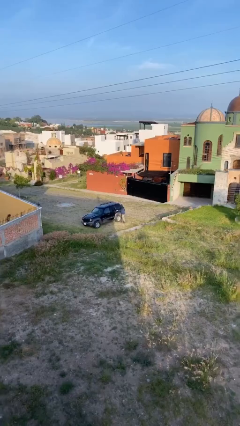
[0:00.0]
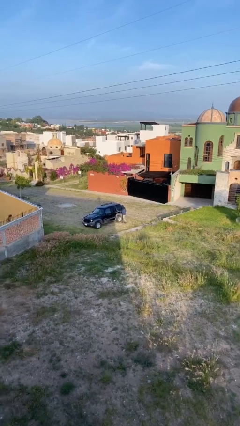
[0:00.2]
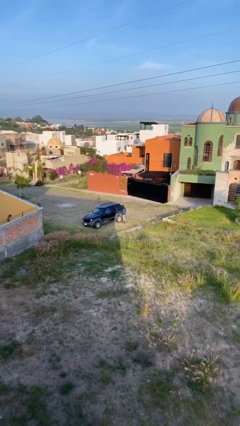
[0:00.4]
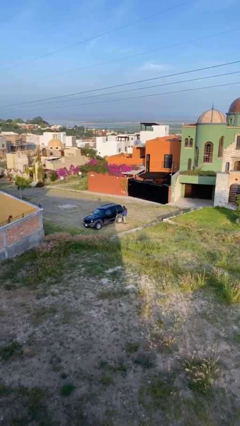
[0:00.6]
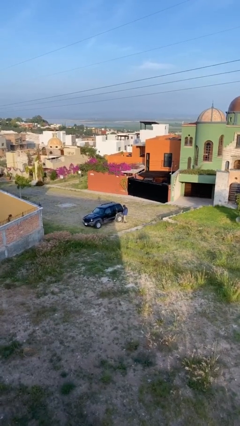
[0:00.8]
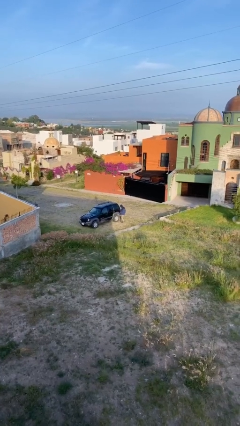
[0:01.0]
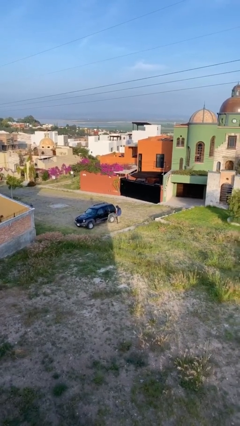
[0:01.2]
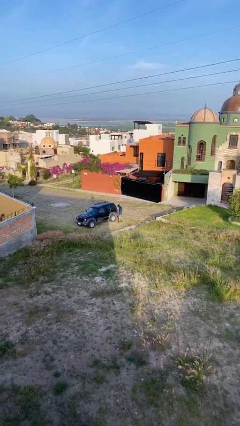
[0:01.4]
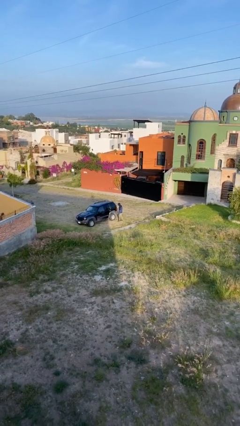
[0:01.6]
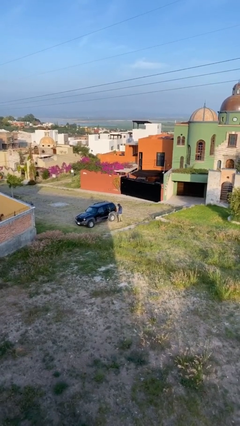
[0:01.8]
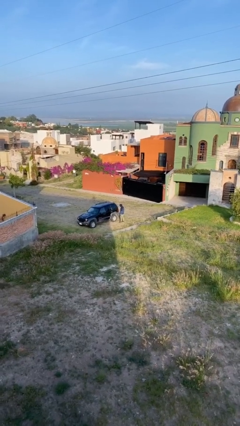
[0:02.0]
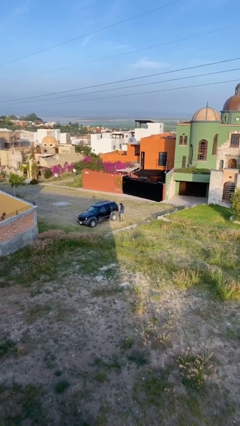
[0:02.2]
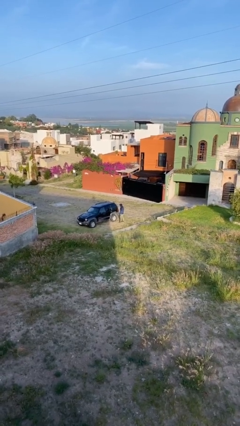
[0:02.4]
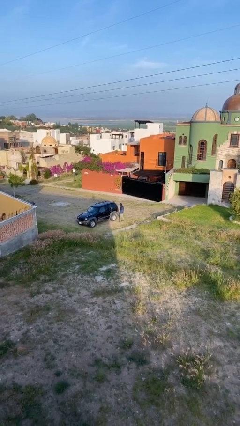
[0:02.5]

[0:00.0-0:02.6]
person closes car door

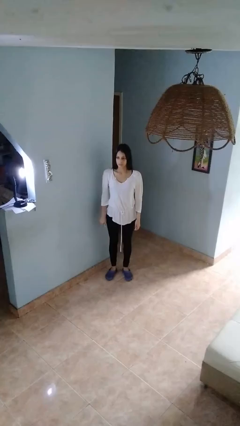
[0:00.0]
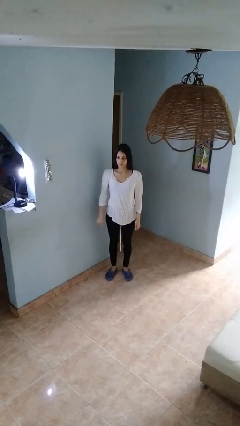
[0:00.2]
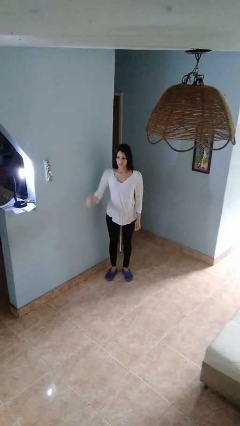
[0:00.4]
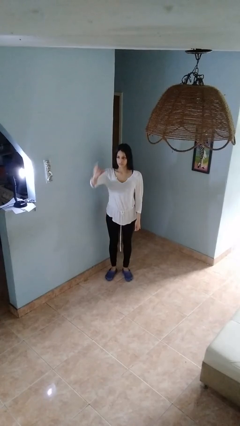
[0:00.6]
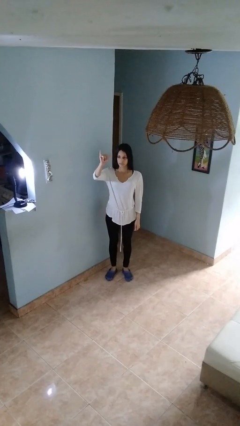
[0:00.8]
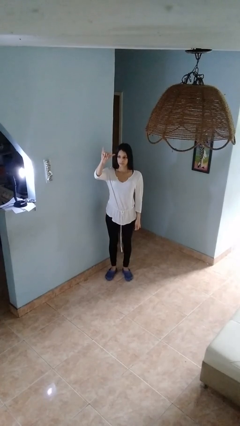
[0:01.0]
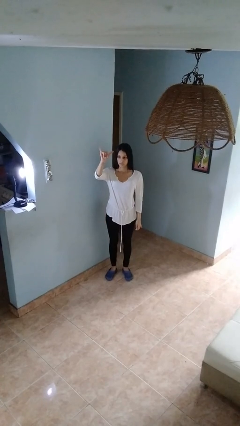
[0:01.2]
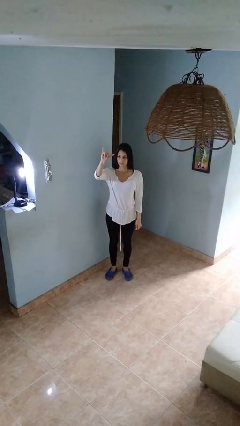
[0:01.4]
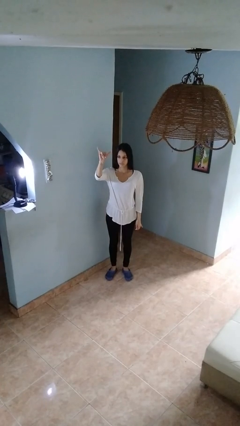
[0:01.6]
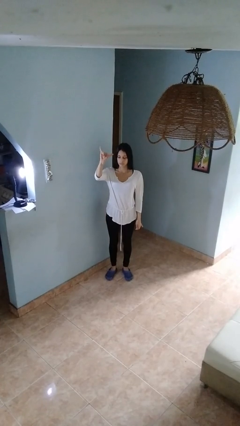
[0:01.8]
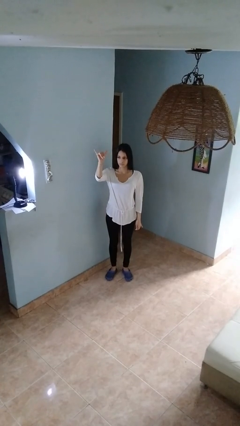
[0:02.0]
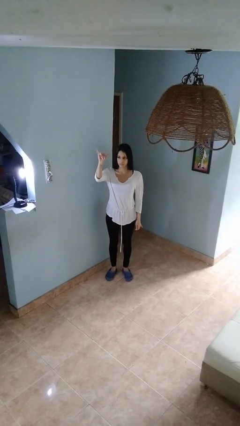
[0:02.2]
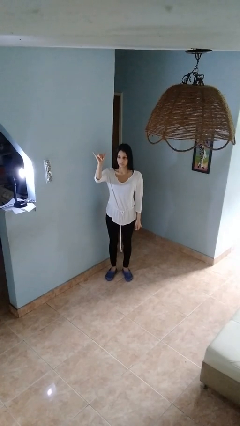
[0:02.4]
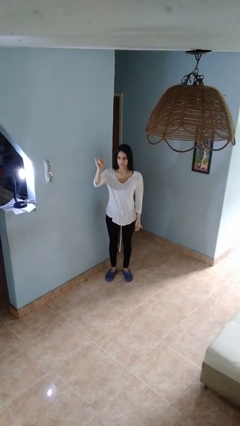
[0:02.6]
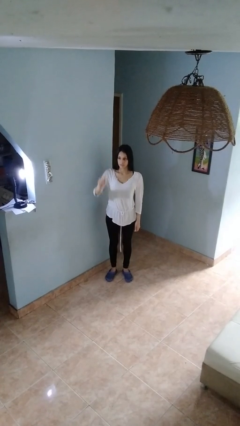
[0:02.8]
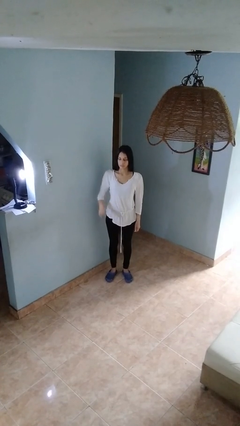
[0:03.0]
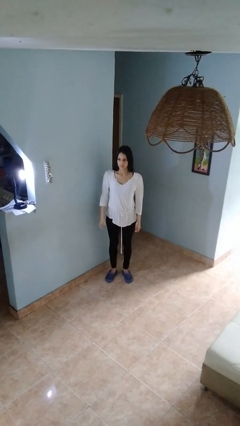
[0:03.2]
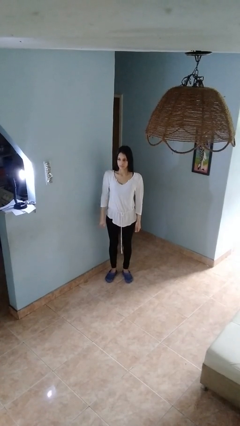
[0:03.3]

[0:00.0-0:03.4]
person gestures hang loose

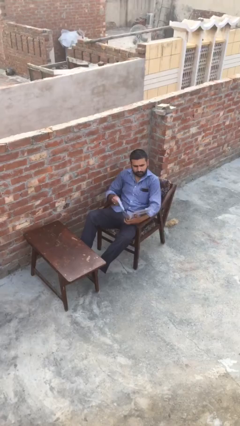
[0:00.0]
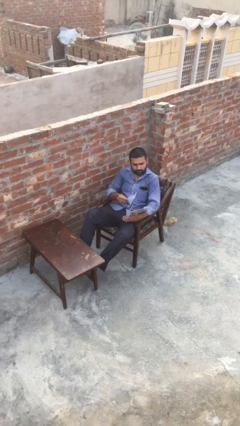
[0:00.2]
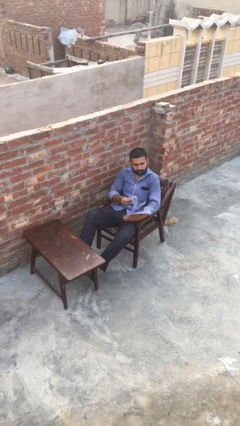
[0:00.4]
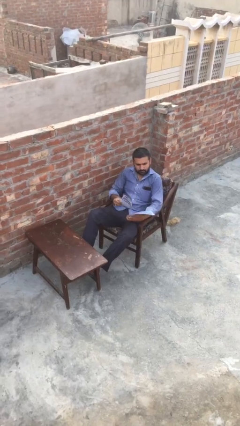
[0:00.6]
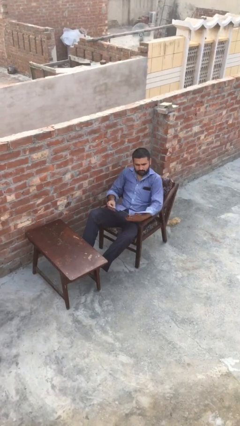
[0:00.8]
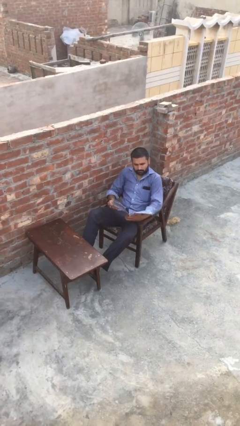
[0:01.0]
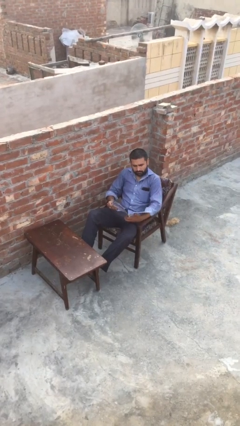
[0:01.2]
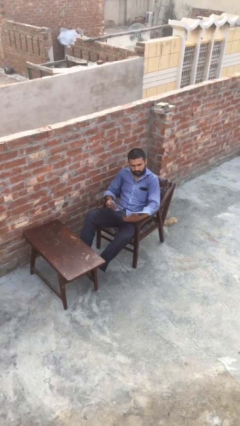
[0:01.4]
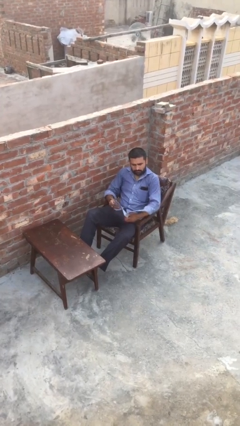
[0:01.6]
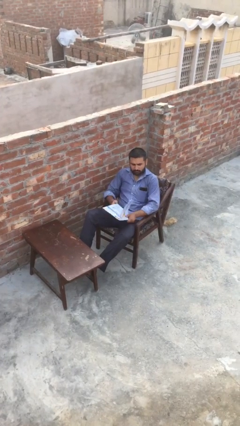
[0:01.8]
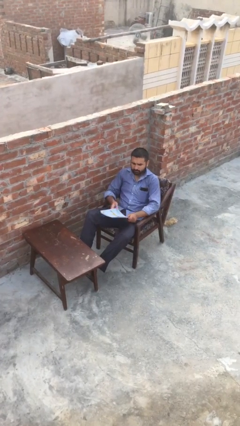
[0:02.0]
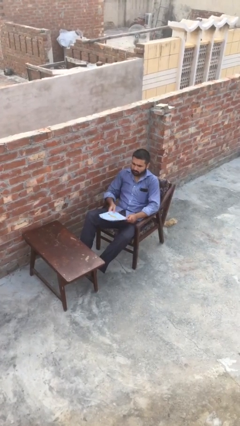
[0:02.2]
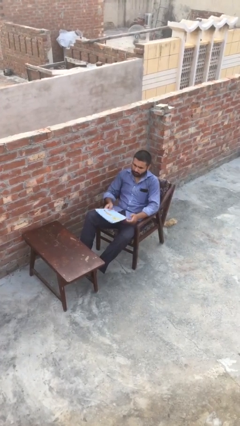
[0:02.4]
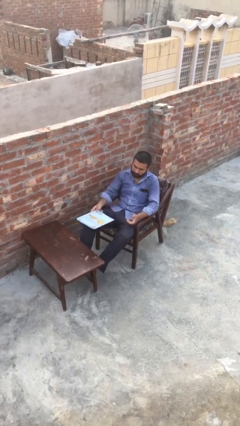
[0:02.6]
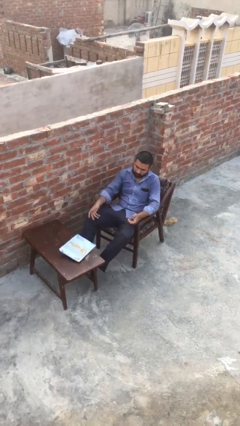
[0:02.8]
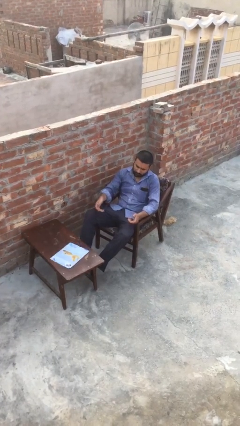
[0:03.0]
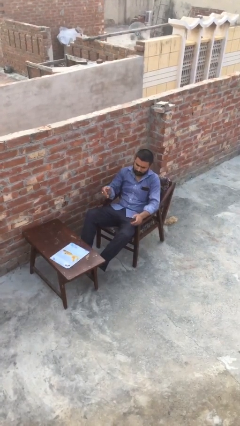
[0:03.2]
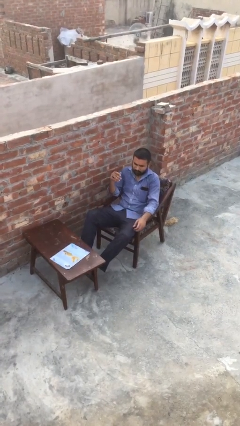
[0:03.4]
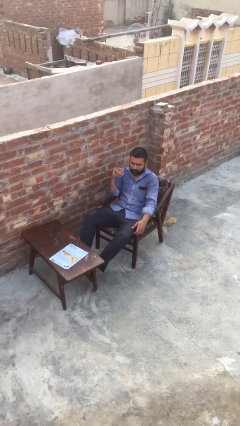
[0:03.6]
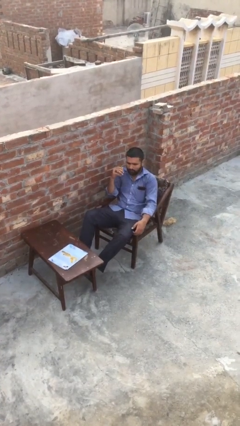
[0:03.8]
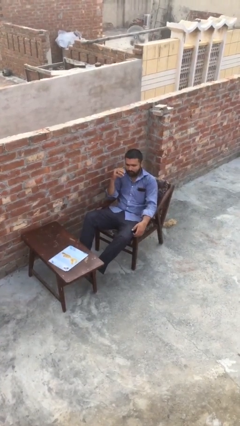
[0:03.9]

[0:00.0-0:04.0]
person puts down object on table

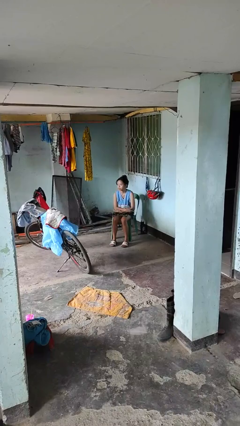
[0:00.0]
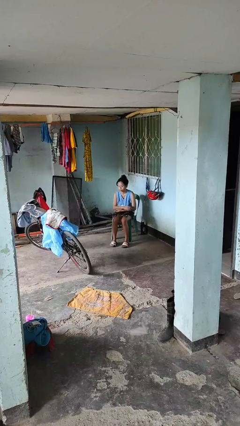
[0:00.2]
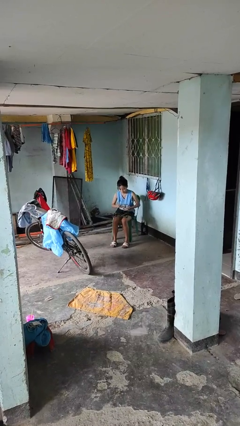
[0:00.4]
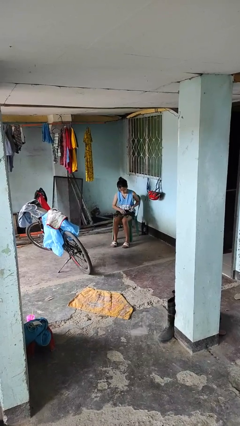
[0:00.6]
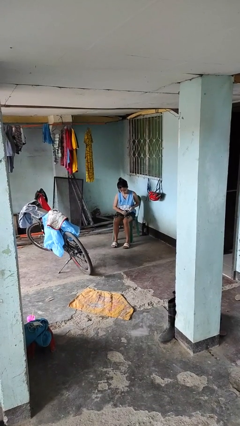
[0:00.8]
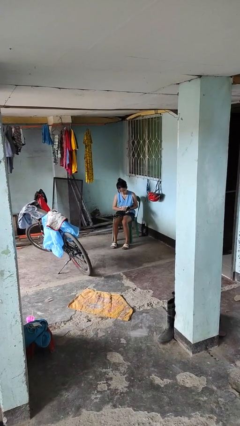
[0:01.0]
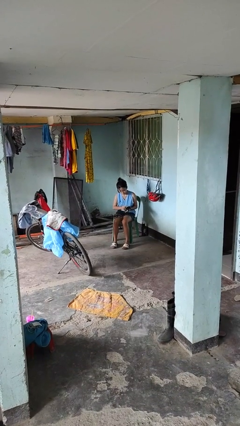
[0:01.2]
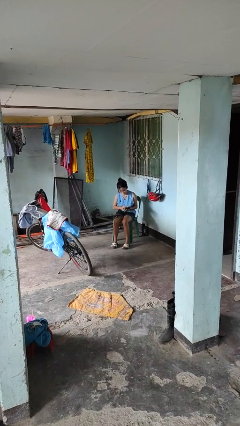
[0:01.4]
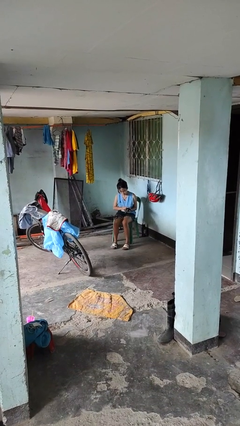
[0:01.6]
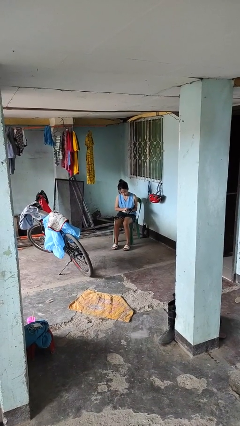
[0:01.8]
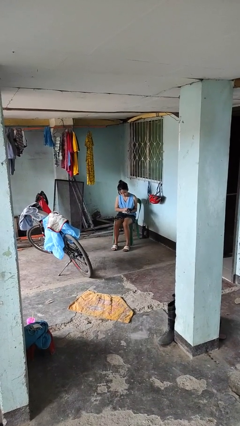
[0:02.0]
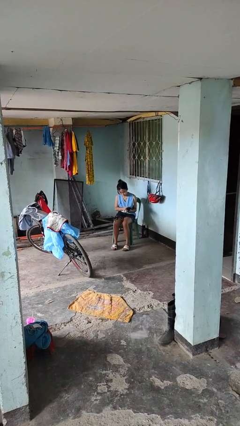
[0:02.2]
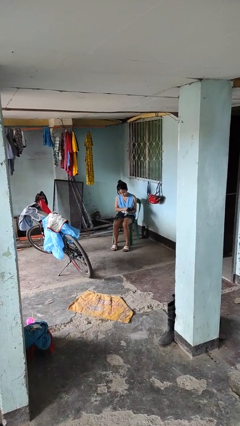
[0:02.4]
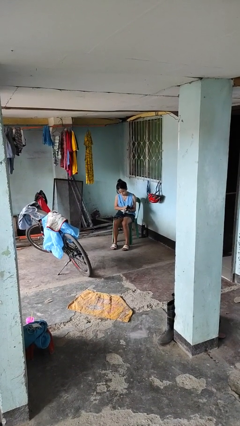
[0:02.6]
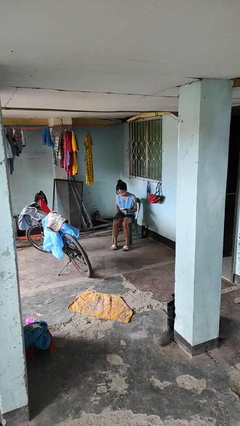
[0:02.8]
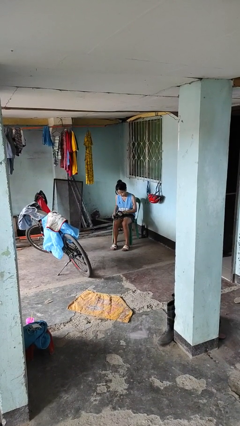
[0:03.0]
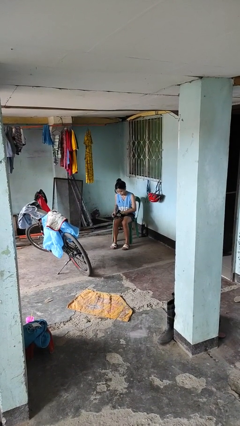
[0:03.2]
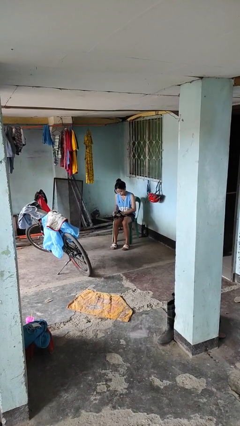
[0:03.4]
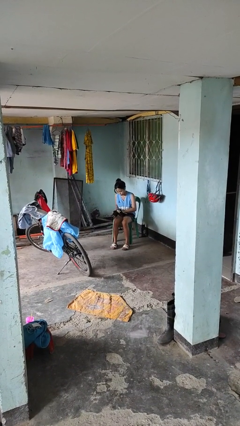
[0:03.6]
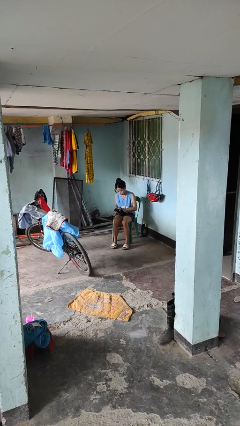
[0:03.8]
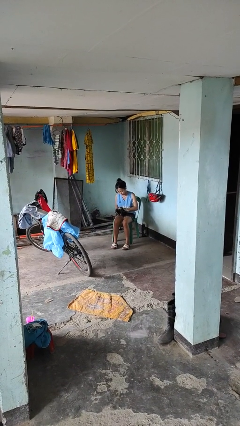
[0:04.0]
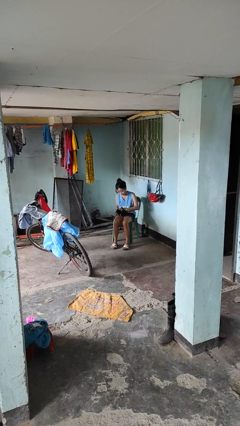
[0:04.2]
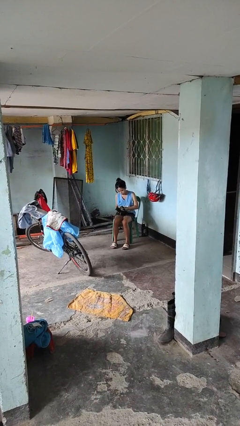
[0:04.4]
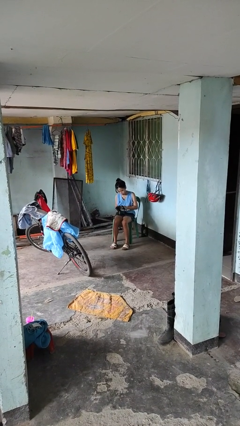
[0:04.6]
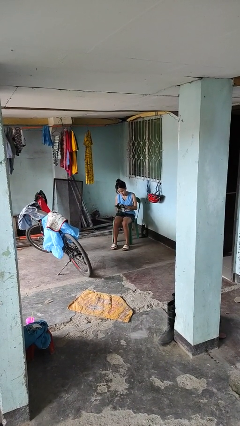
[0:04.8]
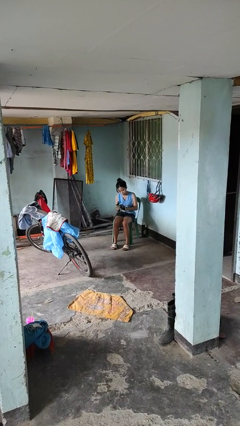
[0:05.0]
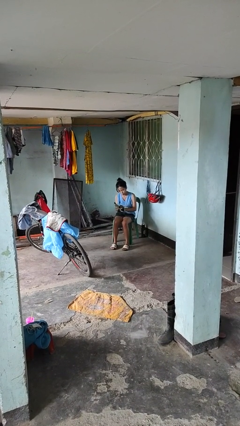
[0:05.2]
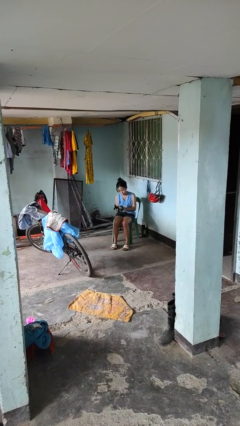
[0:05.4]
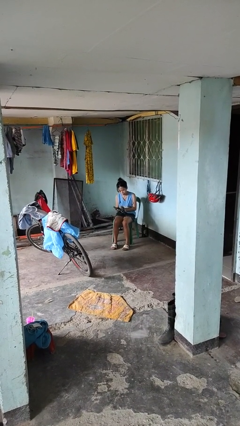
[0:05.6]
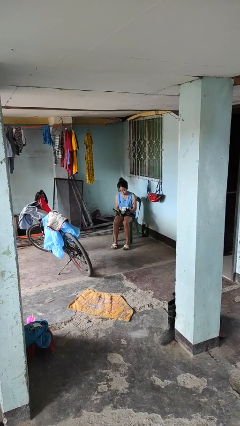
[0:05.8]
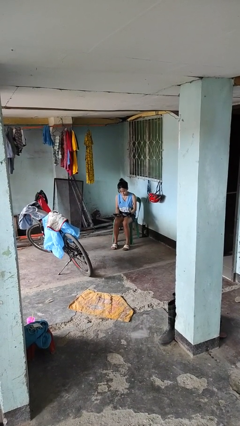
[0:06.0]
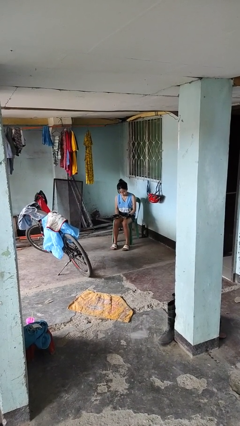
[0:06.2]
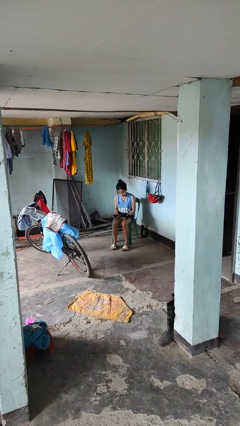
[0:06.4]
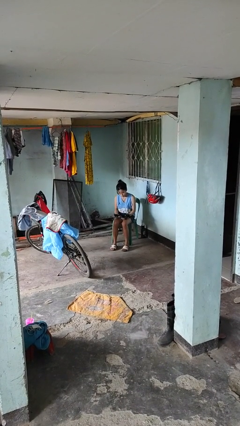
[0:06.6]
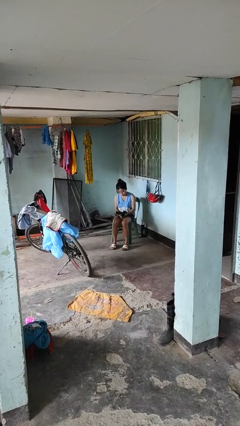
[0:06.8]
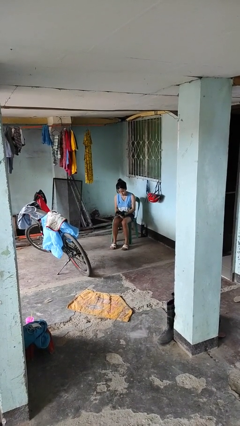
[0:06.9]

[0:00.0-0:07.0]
person puts on gloves

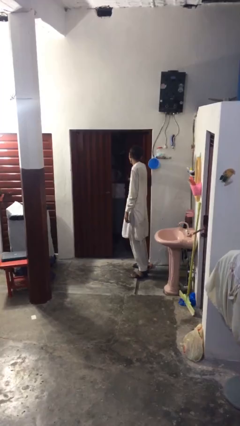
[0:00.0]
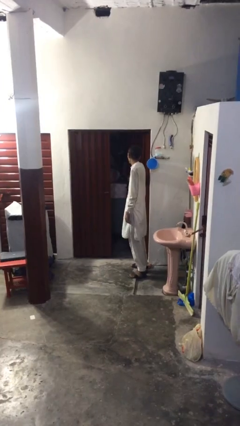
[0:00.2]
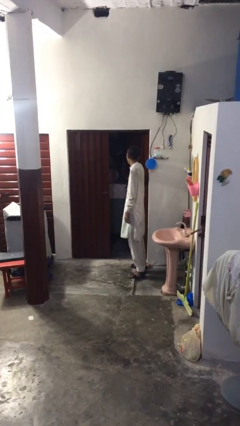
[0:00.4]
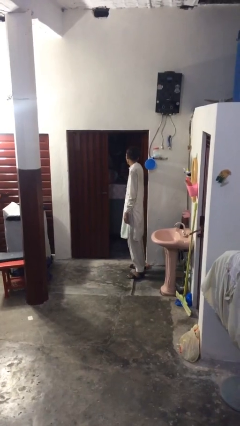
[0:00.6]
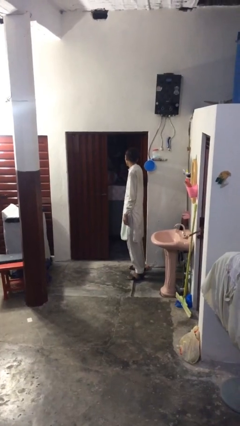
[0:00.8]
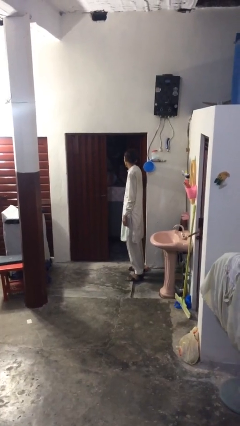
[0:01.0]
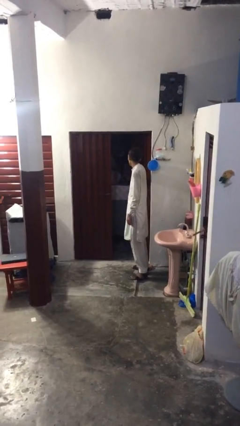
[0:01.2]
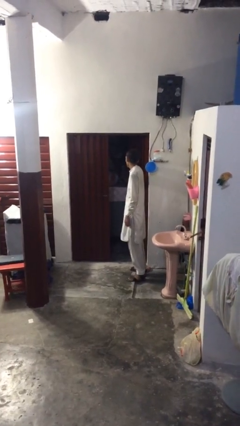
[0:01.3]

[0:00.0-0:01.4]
person opens facility door
